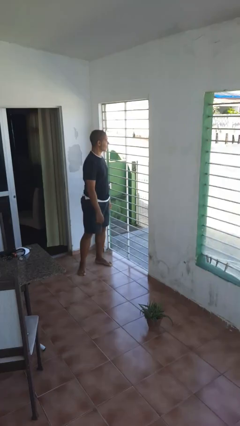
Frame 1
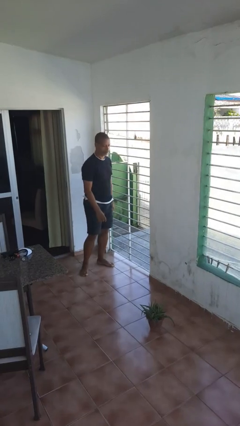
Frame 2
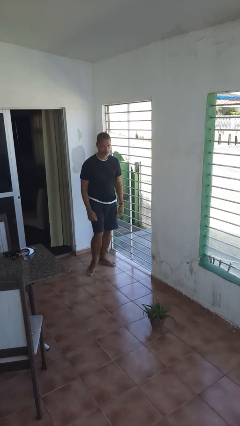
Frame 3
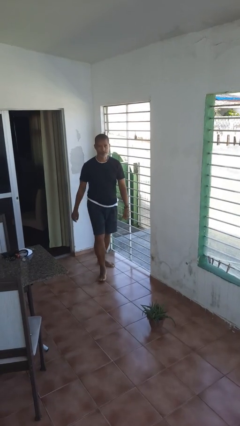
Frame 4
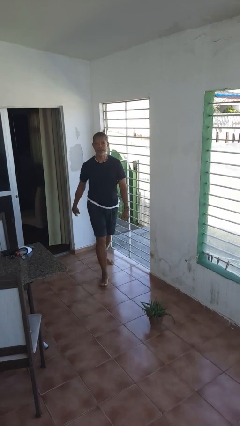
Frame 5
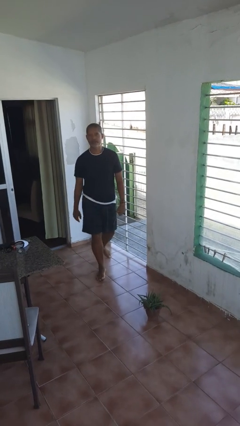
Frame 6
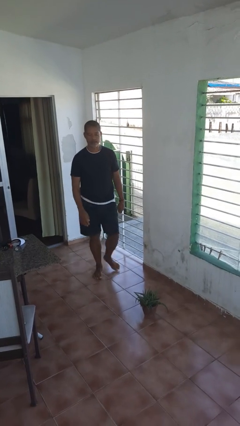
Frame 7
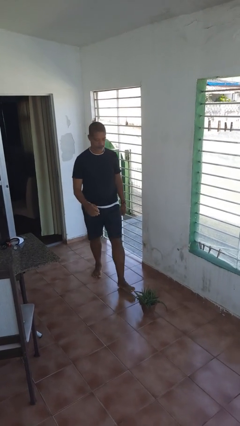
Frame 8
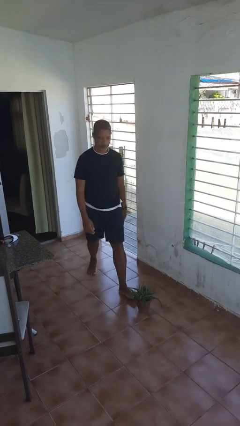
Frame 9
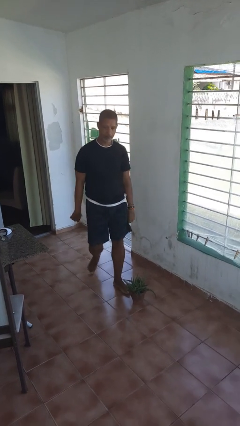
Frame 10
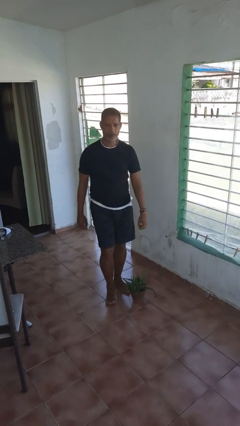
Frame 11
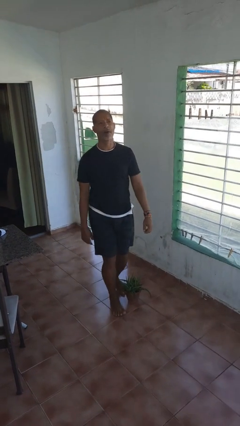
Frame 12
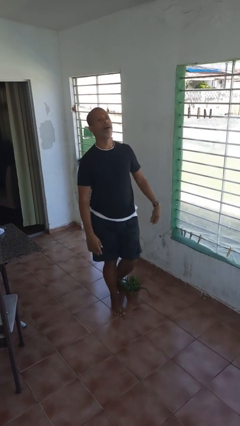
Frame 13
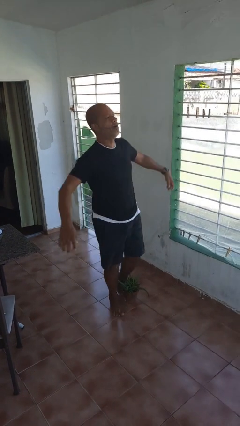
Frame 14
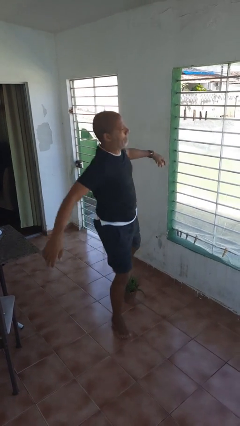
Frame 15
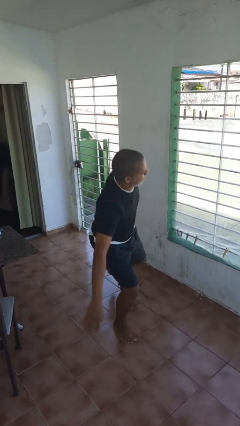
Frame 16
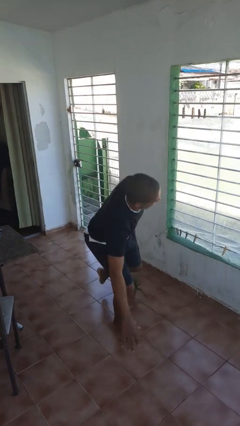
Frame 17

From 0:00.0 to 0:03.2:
person trips on object on floor

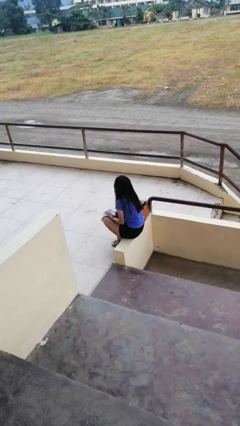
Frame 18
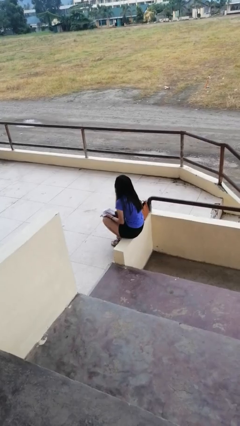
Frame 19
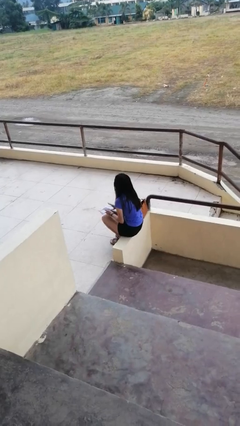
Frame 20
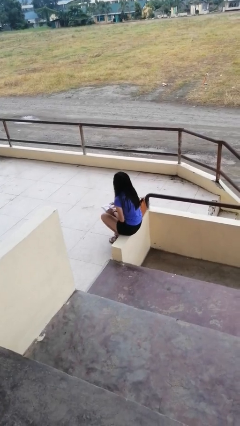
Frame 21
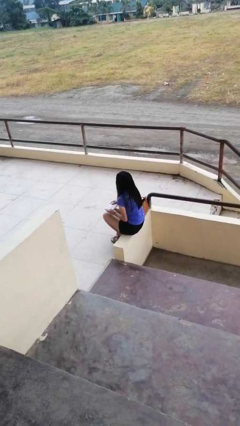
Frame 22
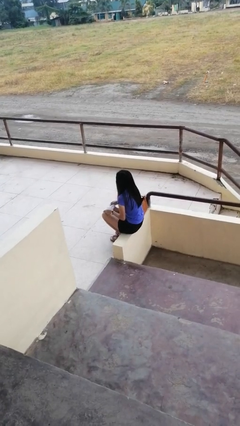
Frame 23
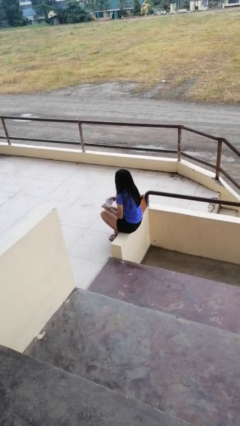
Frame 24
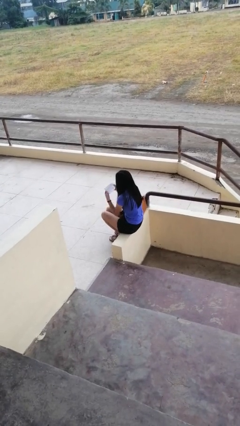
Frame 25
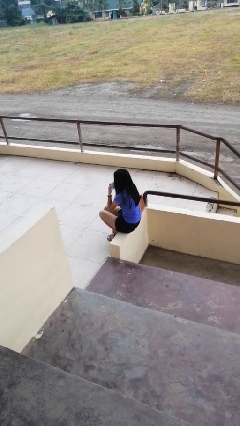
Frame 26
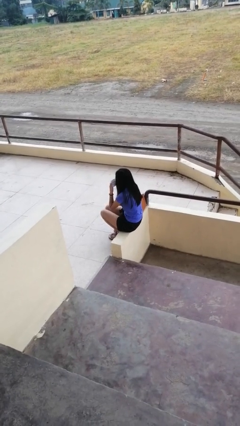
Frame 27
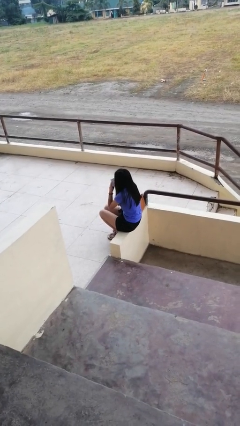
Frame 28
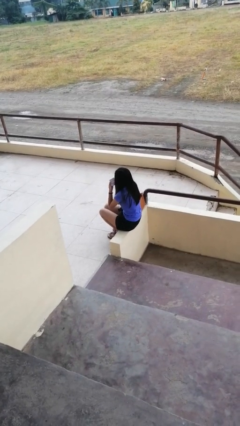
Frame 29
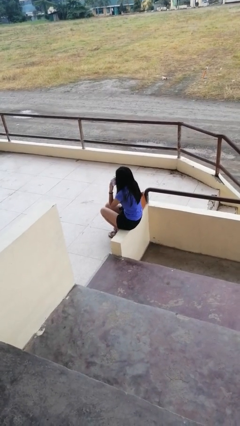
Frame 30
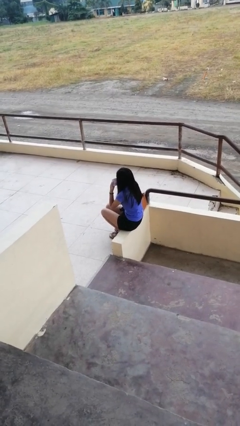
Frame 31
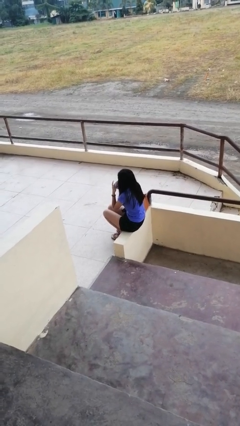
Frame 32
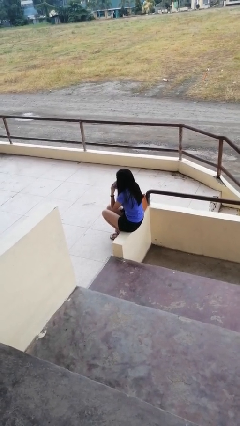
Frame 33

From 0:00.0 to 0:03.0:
person wipes mouth with napkin

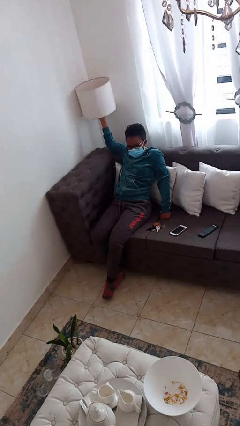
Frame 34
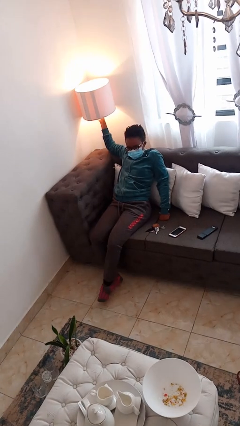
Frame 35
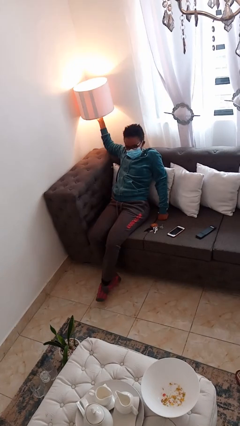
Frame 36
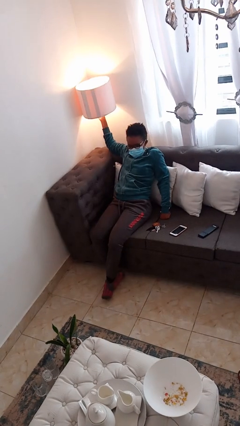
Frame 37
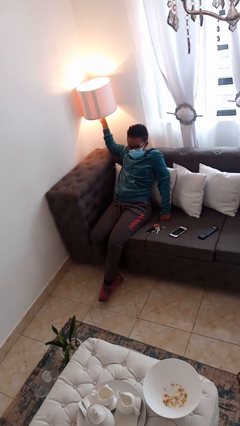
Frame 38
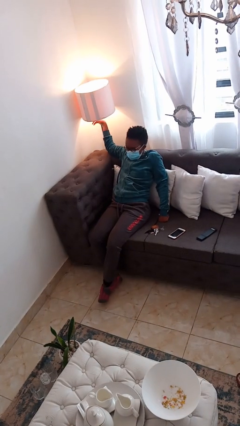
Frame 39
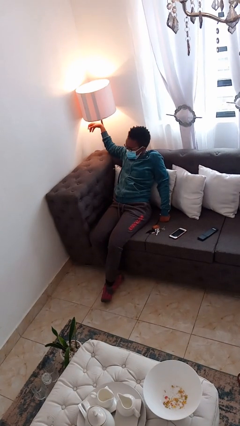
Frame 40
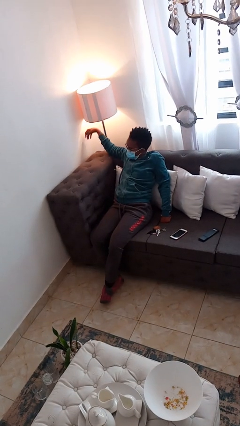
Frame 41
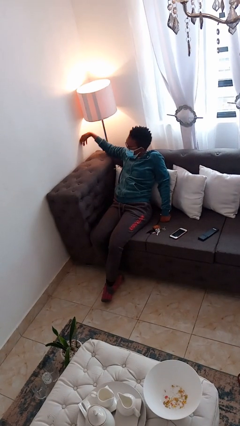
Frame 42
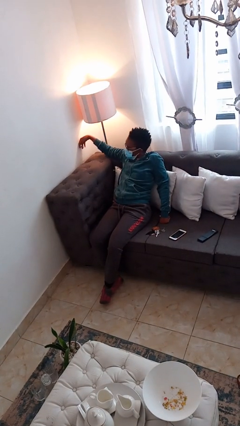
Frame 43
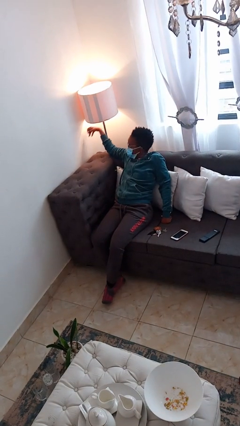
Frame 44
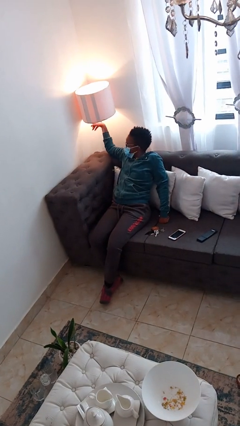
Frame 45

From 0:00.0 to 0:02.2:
person turns on lamp

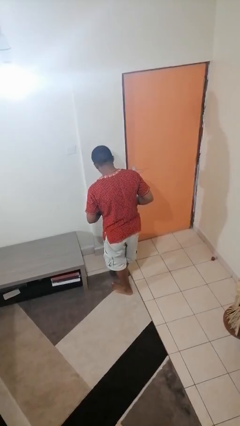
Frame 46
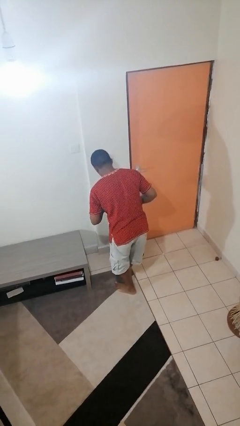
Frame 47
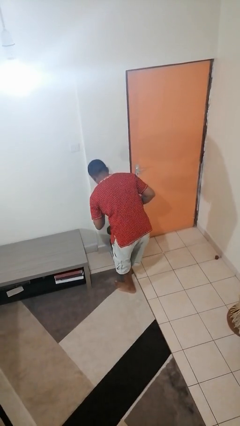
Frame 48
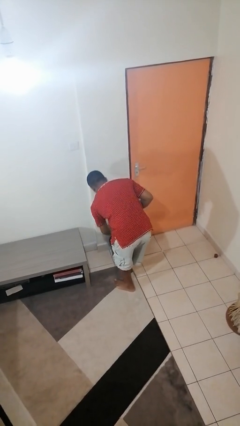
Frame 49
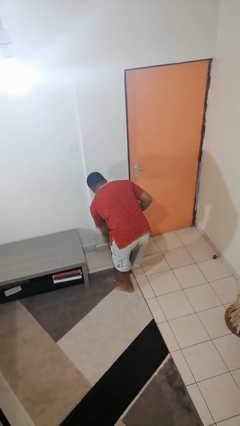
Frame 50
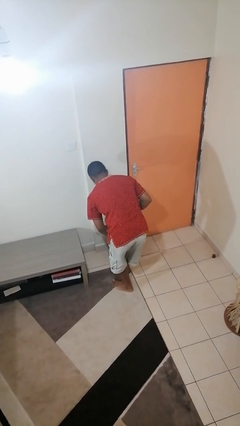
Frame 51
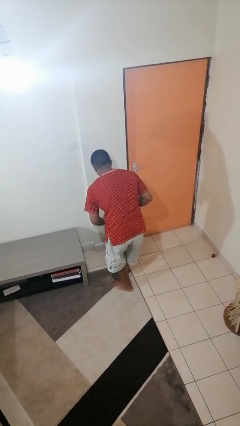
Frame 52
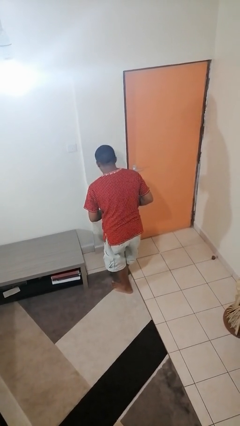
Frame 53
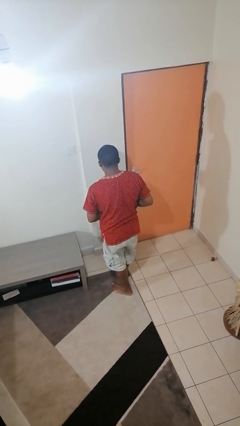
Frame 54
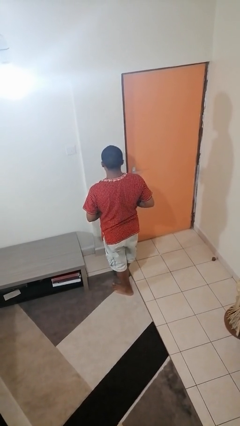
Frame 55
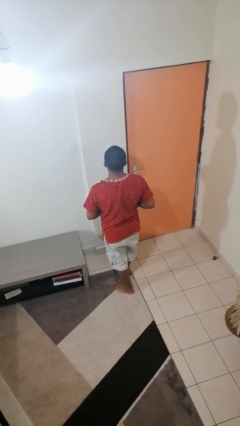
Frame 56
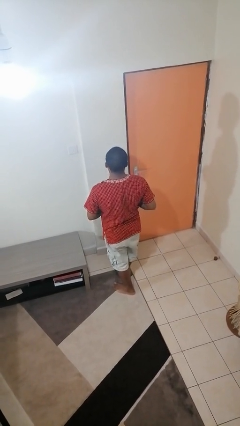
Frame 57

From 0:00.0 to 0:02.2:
person discards trash

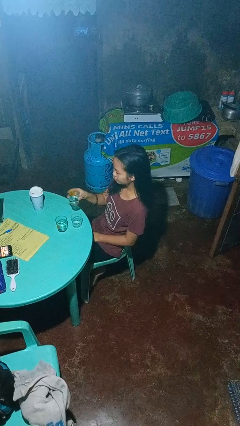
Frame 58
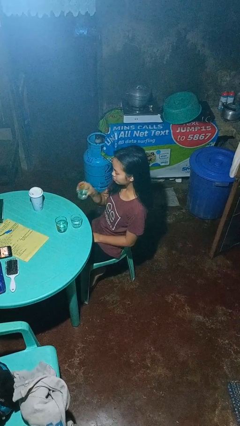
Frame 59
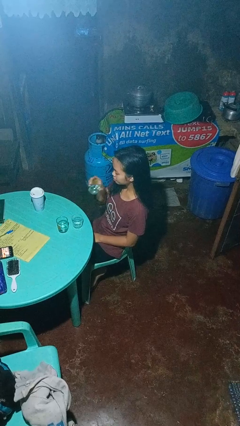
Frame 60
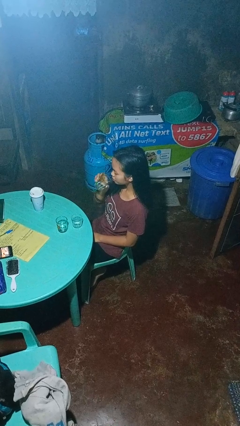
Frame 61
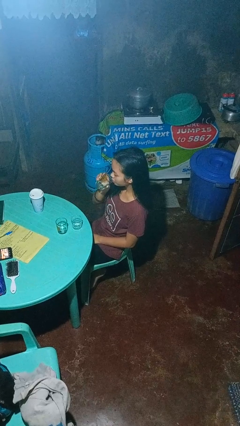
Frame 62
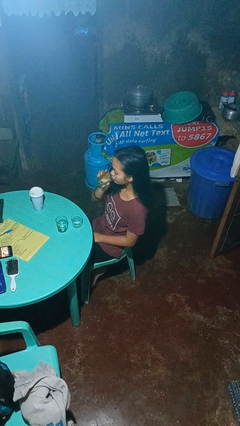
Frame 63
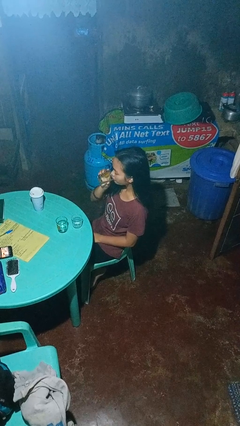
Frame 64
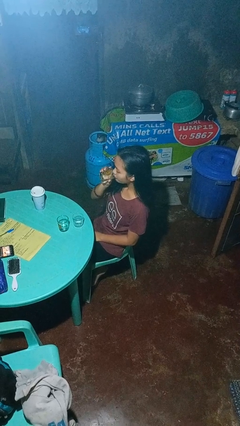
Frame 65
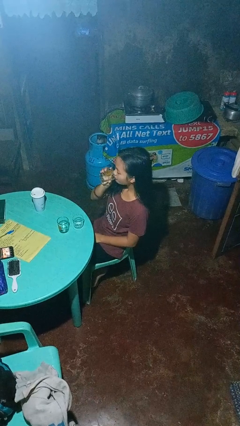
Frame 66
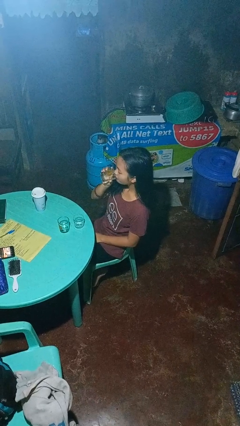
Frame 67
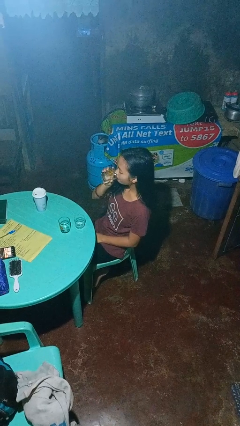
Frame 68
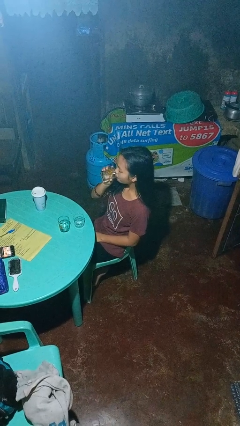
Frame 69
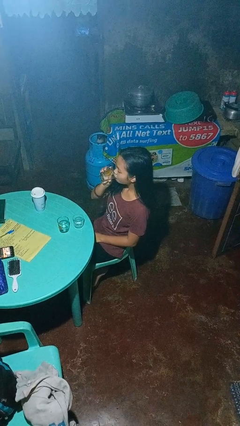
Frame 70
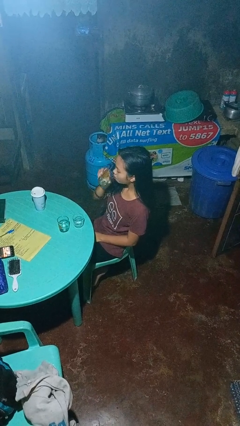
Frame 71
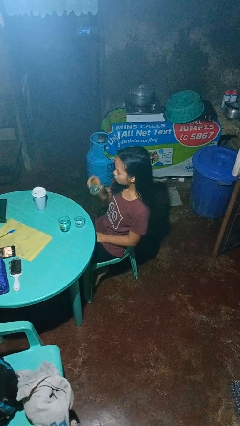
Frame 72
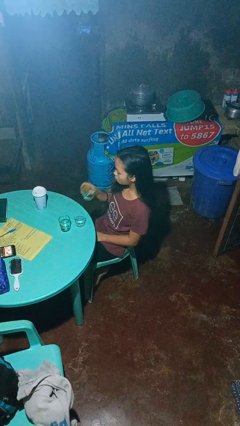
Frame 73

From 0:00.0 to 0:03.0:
person drinks from shotglass

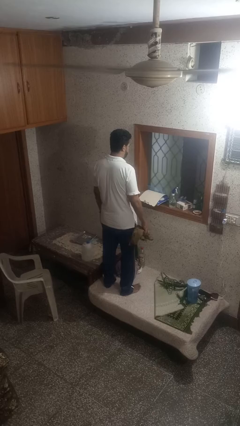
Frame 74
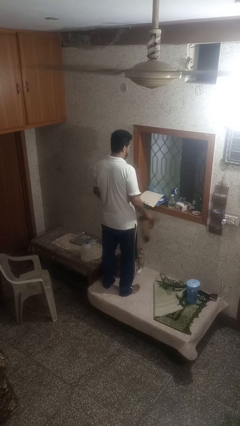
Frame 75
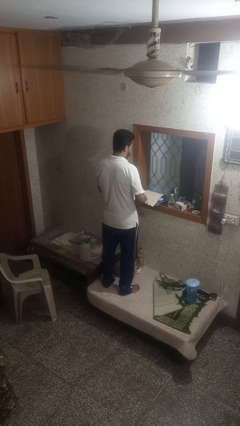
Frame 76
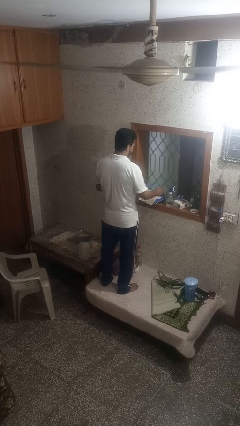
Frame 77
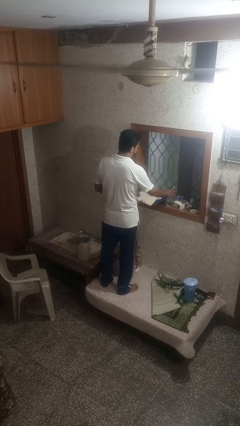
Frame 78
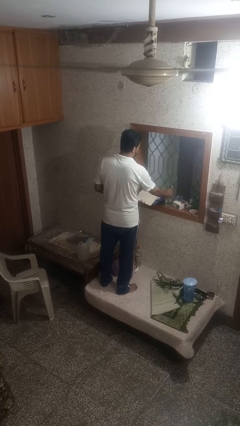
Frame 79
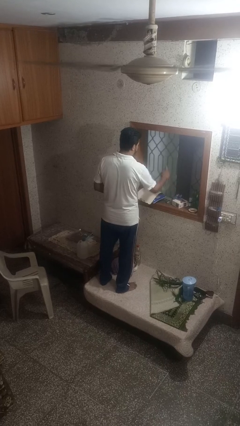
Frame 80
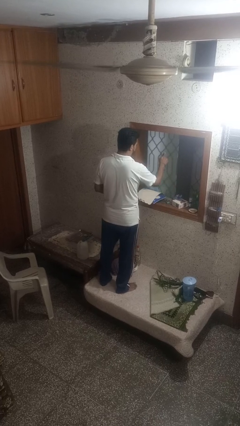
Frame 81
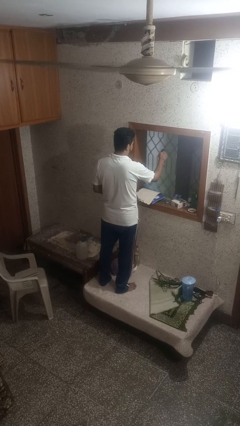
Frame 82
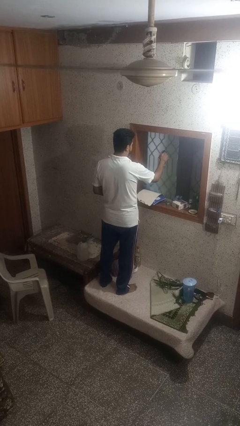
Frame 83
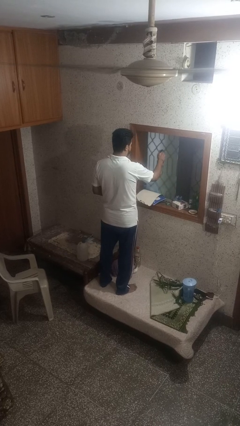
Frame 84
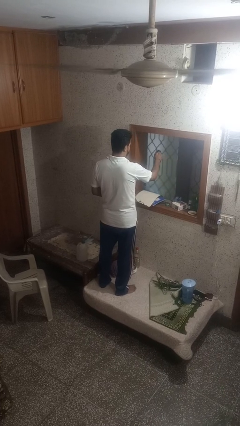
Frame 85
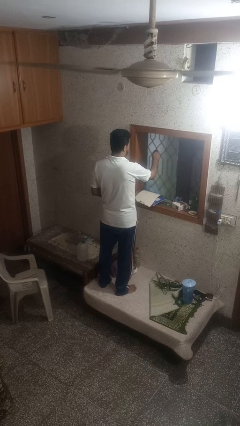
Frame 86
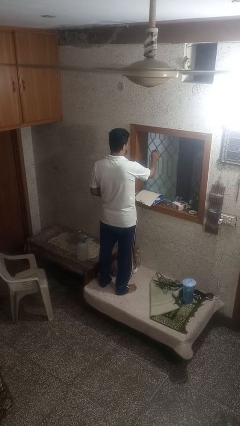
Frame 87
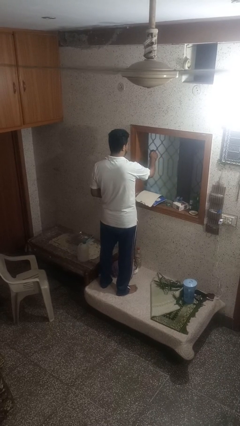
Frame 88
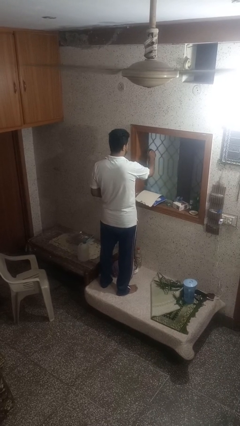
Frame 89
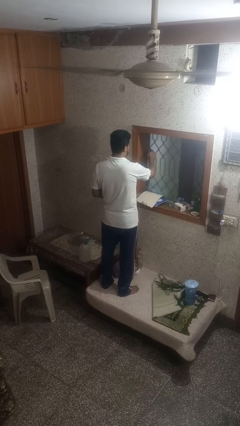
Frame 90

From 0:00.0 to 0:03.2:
person sprays from bottle

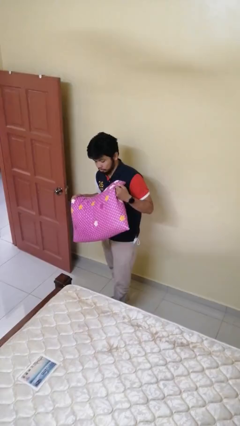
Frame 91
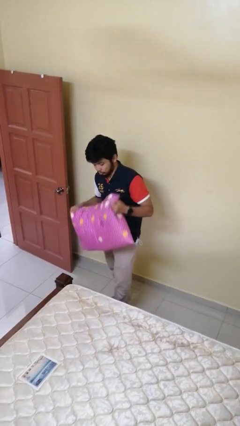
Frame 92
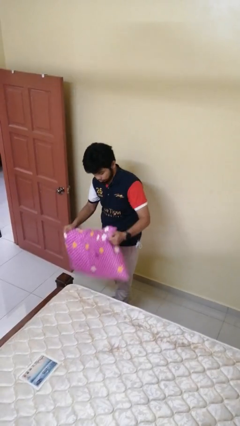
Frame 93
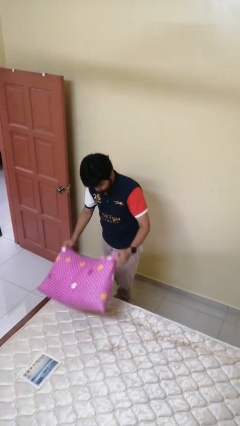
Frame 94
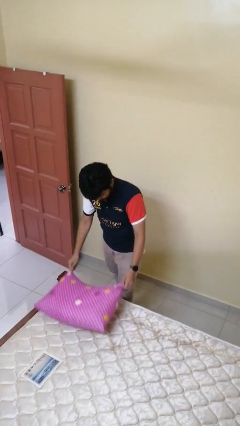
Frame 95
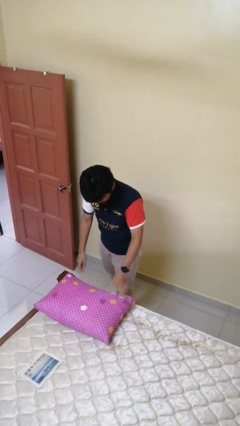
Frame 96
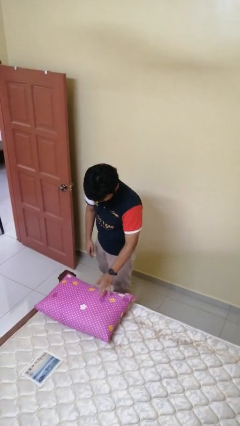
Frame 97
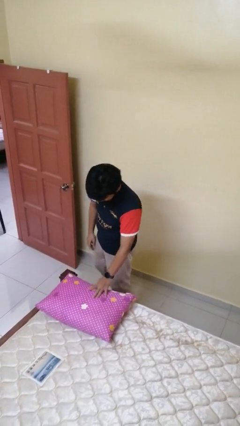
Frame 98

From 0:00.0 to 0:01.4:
person puts down object on bed
